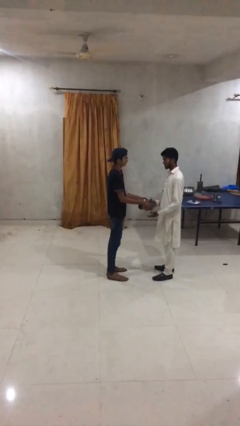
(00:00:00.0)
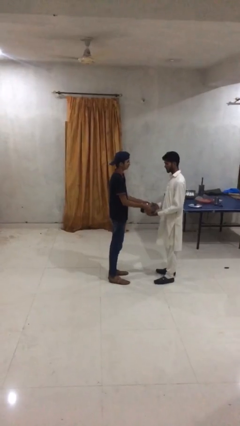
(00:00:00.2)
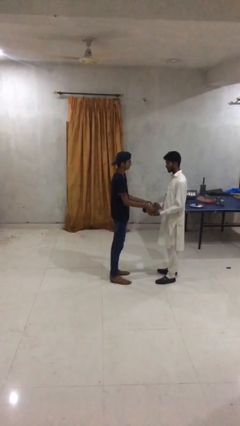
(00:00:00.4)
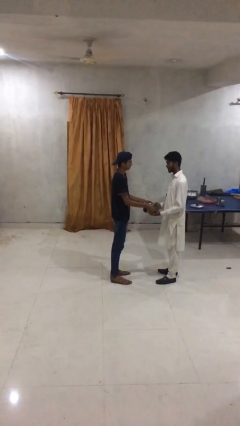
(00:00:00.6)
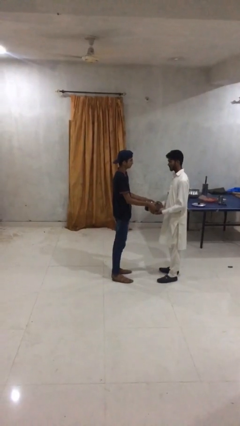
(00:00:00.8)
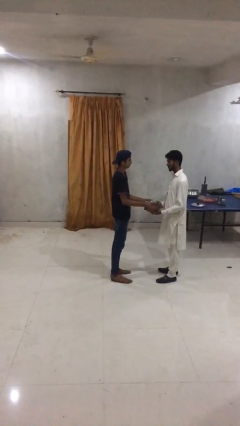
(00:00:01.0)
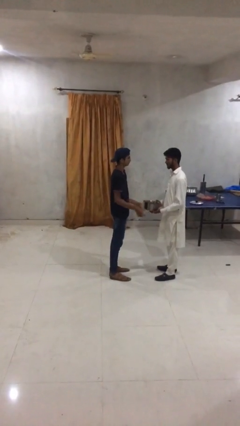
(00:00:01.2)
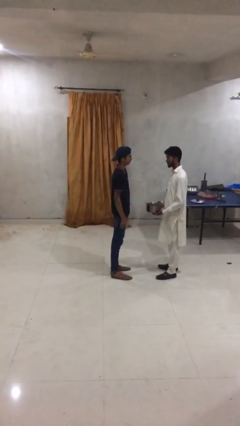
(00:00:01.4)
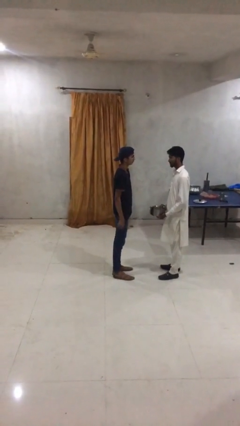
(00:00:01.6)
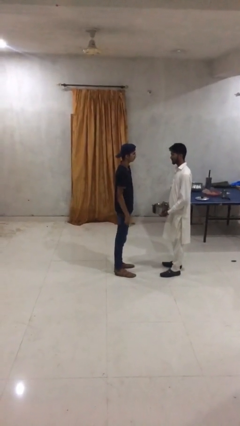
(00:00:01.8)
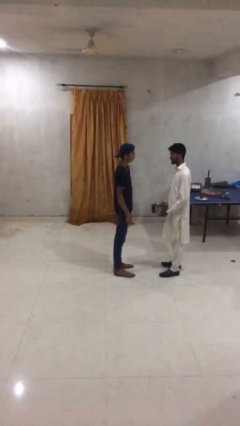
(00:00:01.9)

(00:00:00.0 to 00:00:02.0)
person transfers object to person

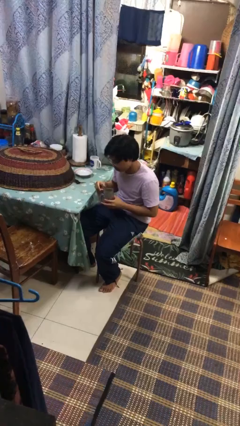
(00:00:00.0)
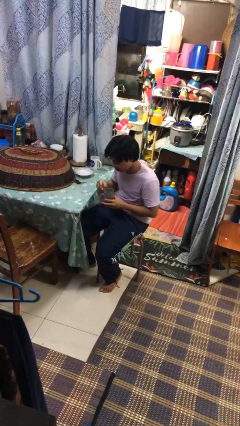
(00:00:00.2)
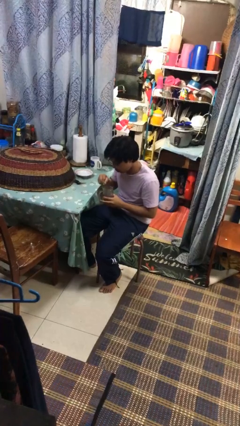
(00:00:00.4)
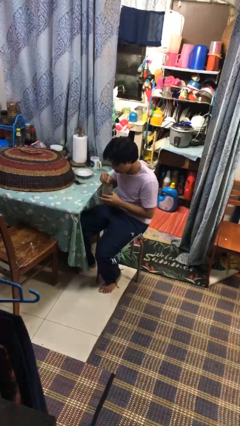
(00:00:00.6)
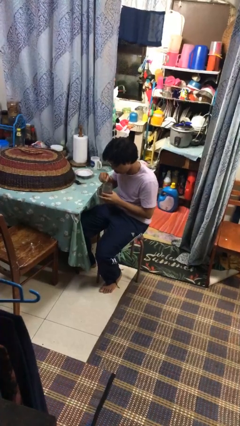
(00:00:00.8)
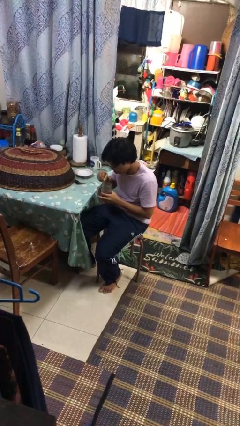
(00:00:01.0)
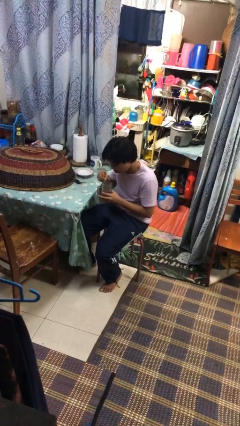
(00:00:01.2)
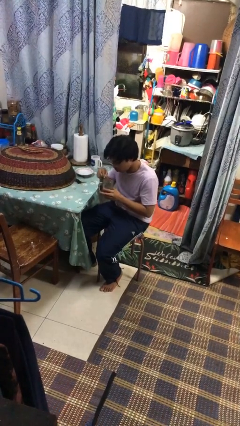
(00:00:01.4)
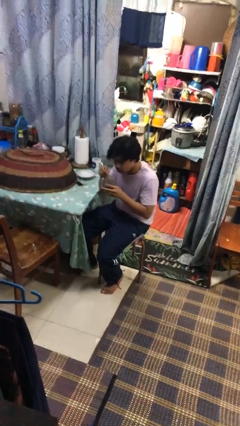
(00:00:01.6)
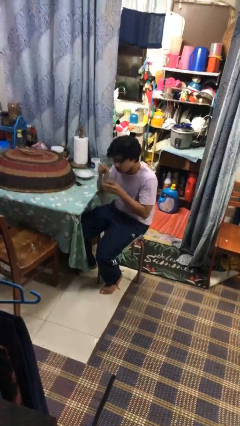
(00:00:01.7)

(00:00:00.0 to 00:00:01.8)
person stirs mug

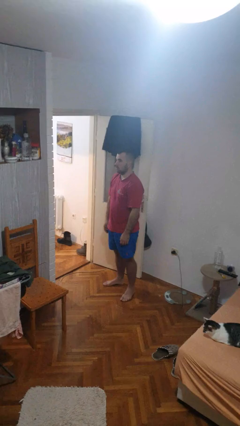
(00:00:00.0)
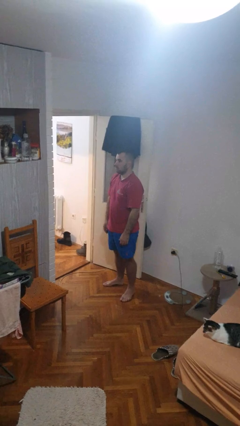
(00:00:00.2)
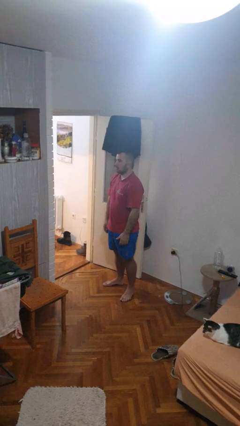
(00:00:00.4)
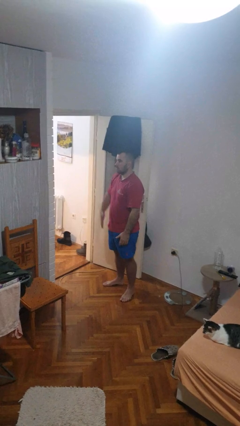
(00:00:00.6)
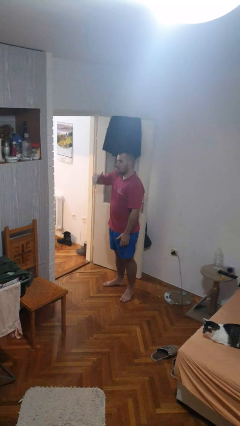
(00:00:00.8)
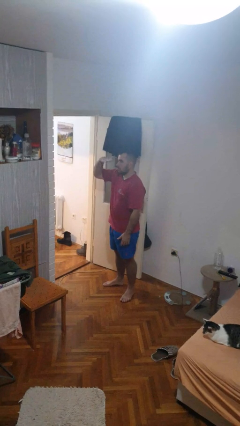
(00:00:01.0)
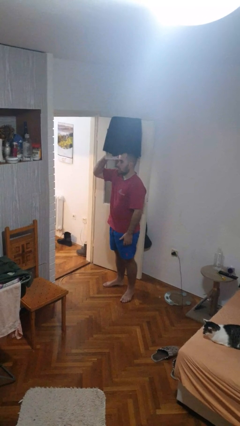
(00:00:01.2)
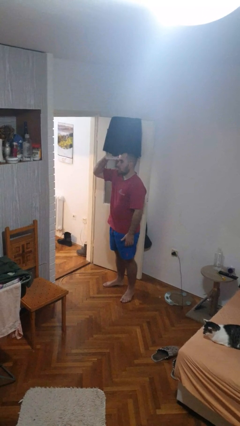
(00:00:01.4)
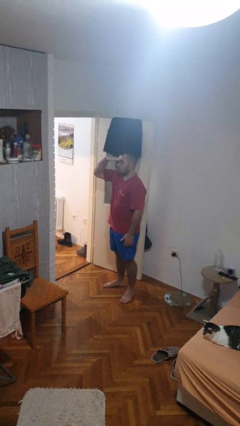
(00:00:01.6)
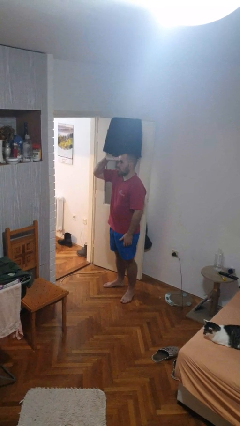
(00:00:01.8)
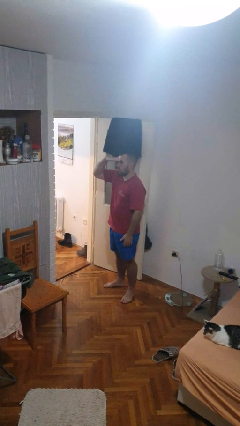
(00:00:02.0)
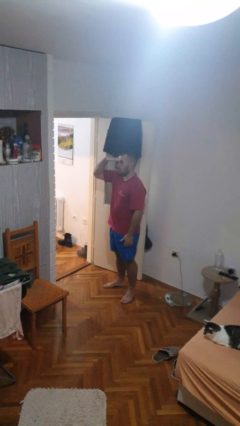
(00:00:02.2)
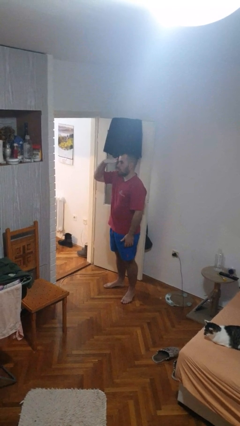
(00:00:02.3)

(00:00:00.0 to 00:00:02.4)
person shades eyes

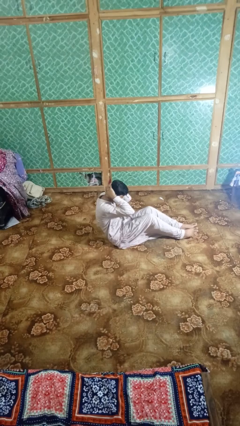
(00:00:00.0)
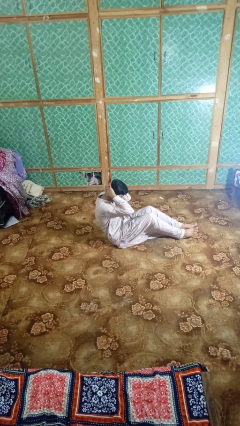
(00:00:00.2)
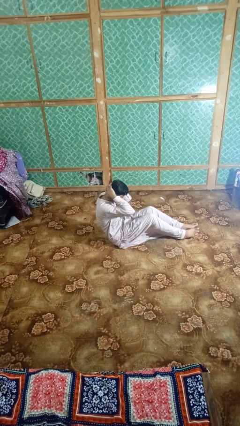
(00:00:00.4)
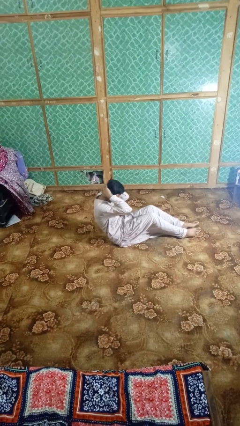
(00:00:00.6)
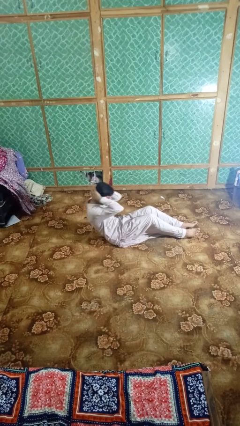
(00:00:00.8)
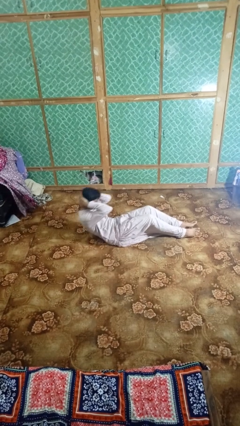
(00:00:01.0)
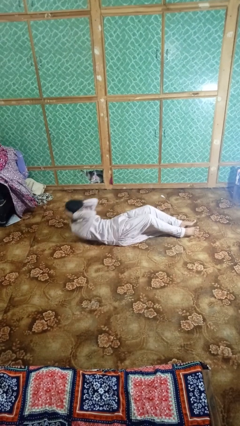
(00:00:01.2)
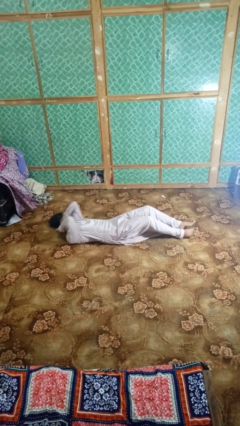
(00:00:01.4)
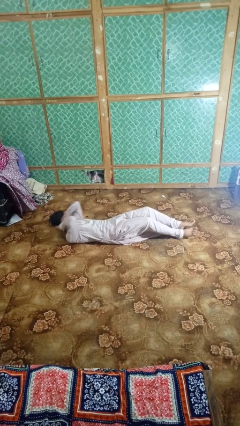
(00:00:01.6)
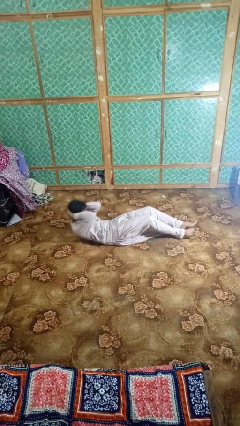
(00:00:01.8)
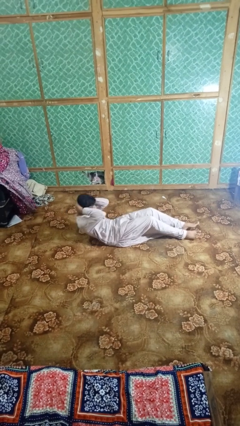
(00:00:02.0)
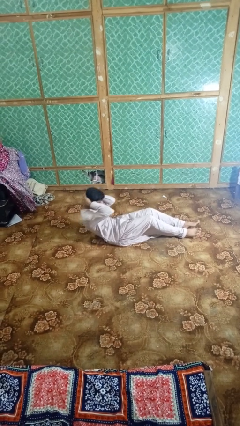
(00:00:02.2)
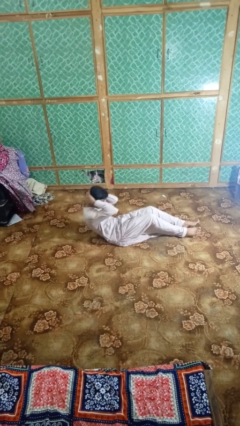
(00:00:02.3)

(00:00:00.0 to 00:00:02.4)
person exercises with situp

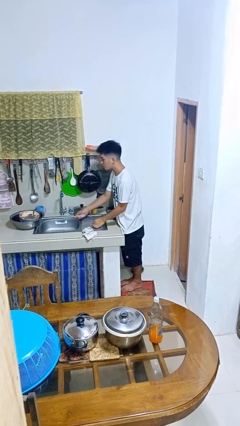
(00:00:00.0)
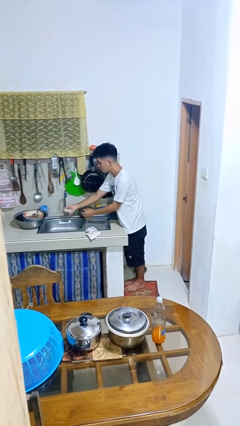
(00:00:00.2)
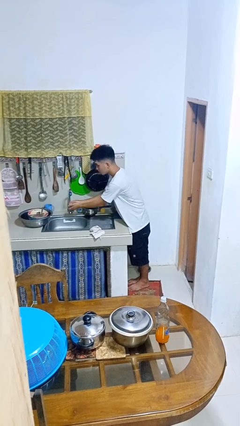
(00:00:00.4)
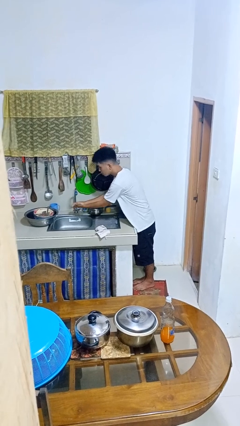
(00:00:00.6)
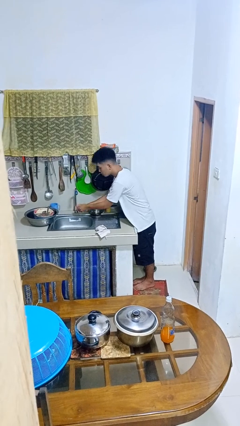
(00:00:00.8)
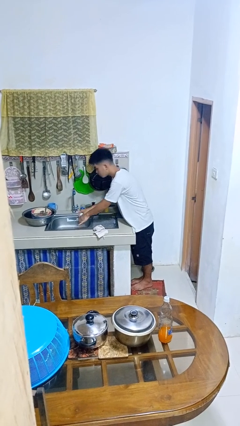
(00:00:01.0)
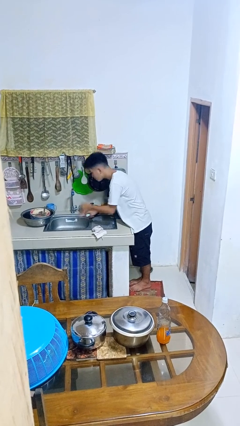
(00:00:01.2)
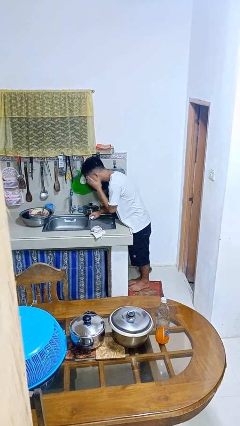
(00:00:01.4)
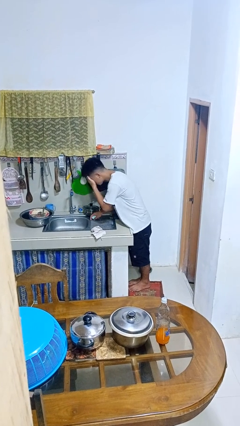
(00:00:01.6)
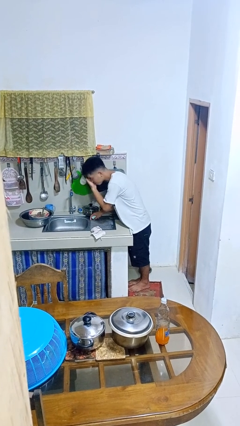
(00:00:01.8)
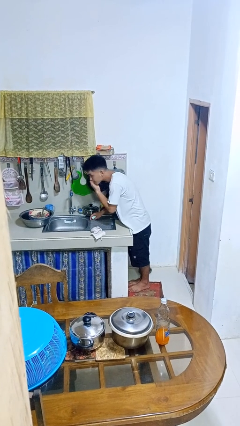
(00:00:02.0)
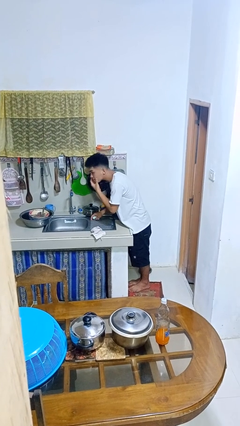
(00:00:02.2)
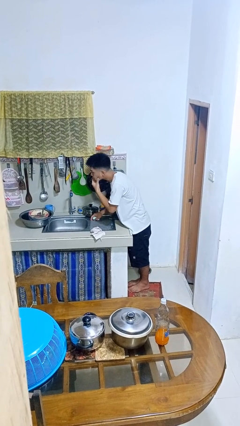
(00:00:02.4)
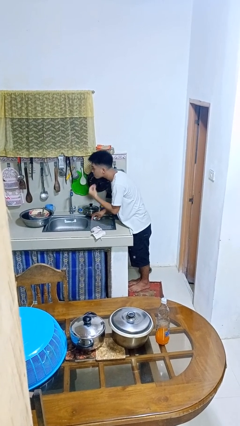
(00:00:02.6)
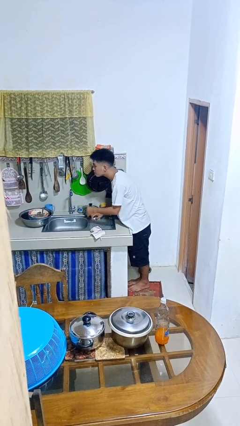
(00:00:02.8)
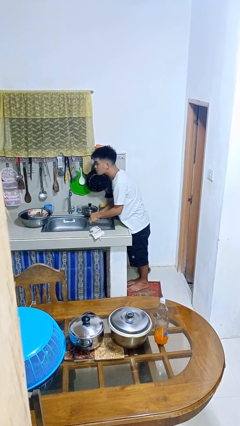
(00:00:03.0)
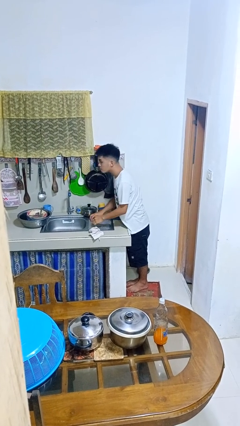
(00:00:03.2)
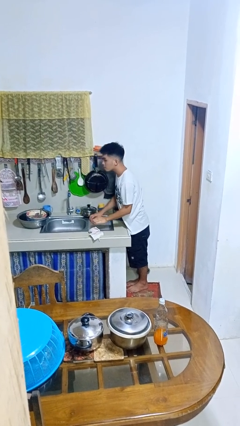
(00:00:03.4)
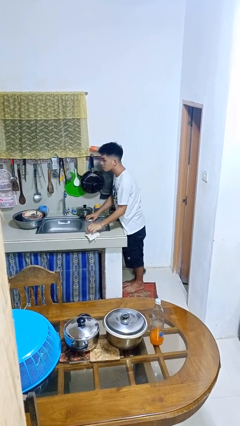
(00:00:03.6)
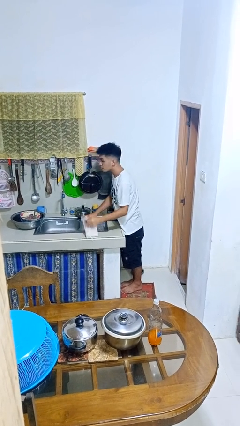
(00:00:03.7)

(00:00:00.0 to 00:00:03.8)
person washes face

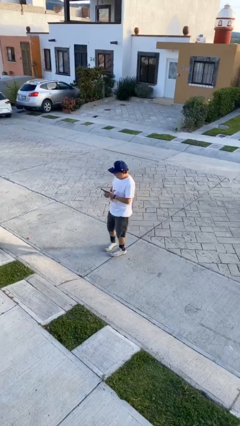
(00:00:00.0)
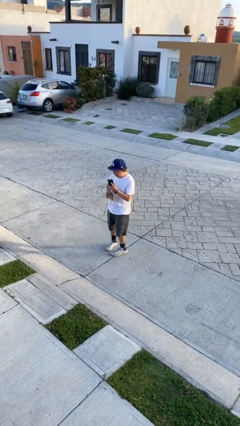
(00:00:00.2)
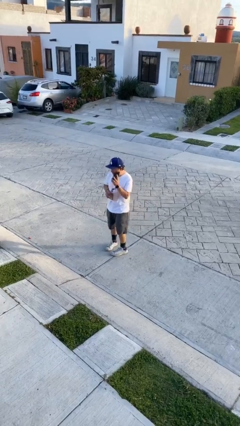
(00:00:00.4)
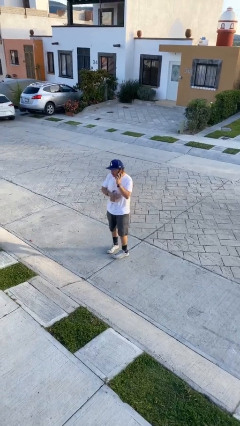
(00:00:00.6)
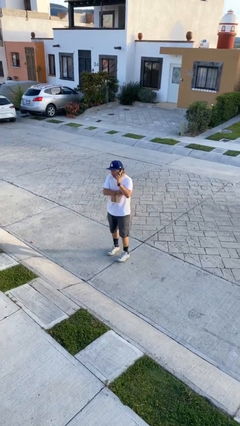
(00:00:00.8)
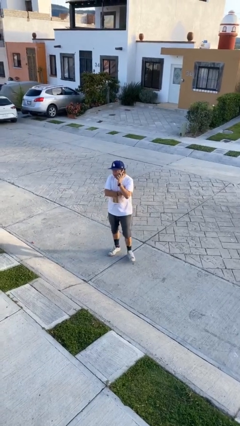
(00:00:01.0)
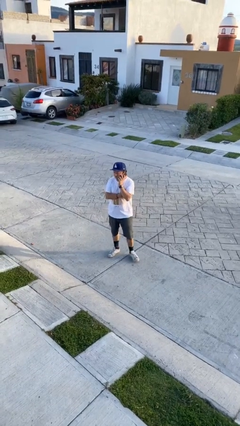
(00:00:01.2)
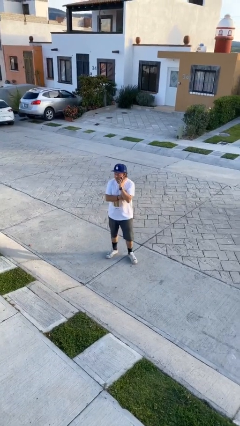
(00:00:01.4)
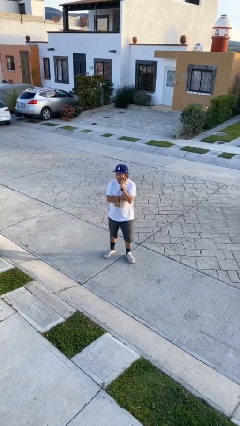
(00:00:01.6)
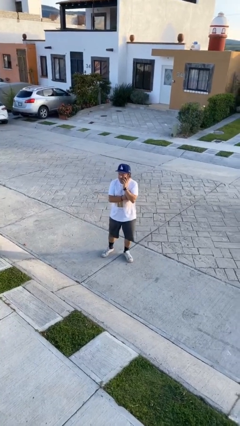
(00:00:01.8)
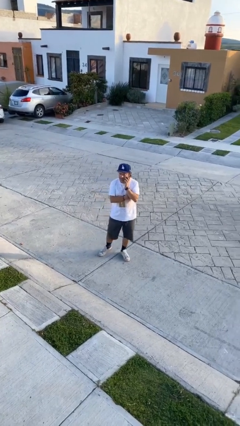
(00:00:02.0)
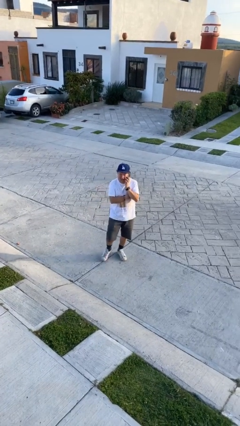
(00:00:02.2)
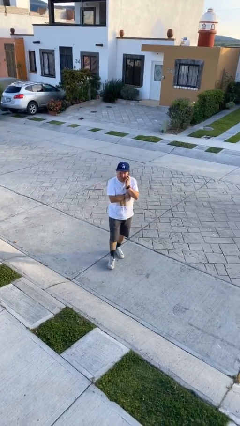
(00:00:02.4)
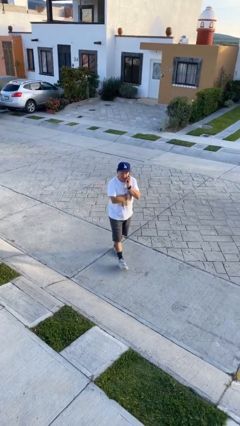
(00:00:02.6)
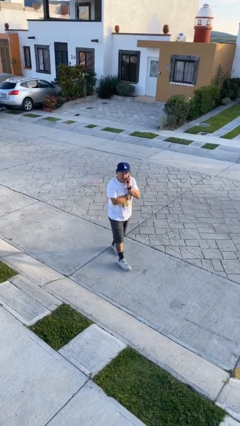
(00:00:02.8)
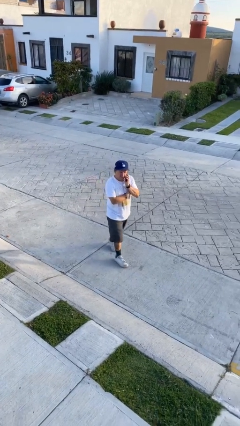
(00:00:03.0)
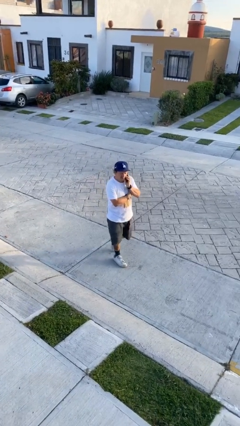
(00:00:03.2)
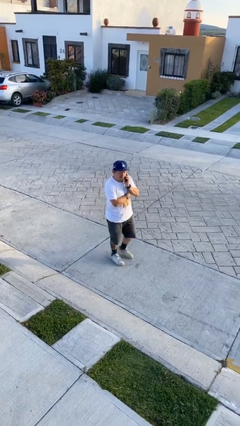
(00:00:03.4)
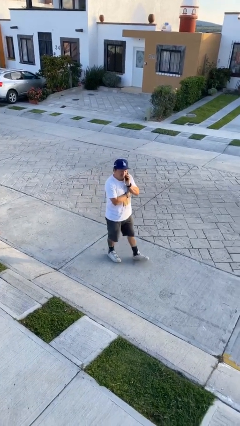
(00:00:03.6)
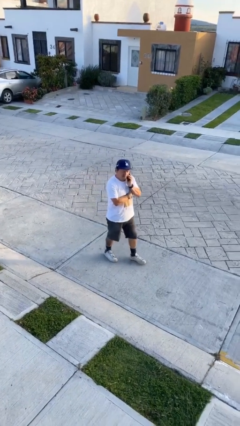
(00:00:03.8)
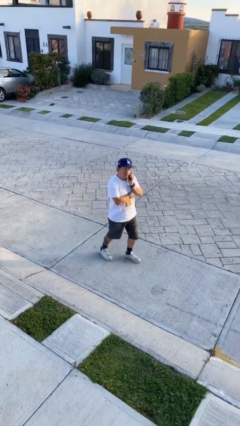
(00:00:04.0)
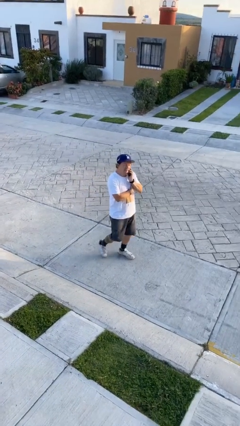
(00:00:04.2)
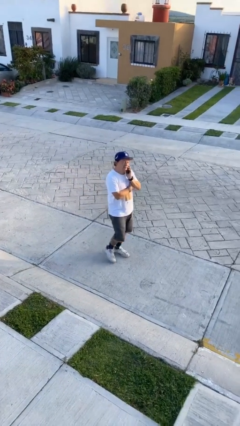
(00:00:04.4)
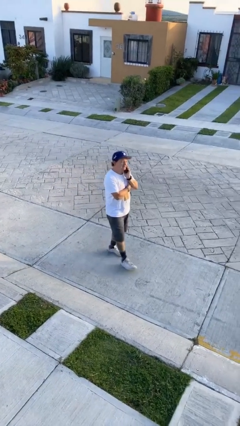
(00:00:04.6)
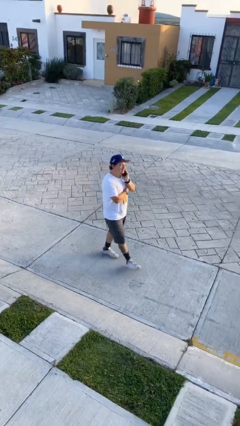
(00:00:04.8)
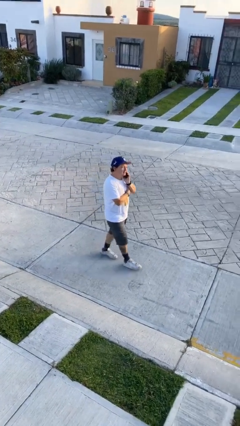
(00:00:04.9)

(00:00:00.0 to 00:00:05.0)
person talks on phone
